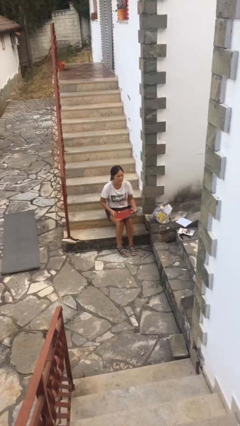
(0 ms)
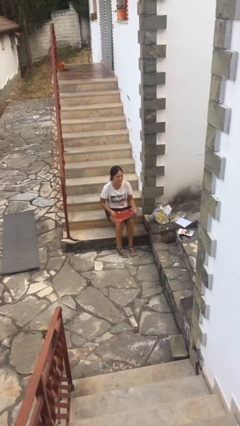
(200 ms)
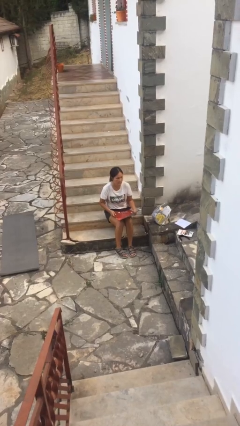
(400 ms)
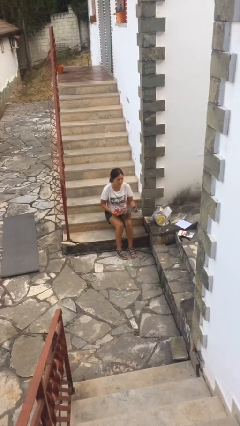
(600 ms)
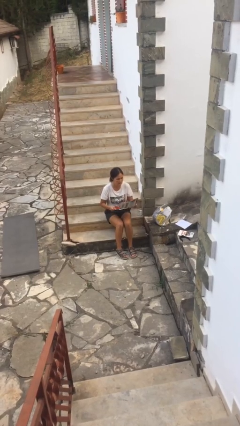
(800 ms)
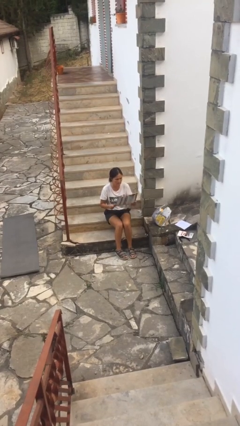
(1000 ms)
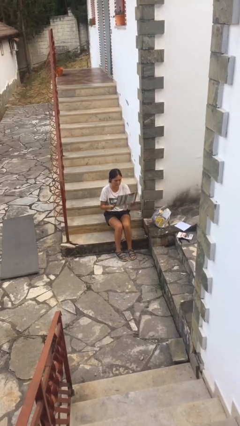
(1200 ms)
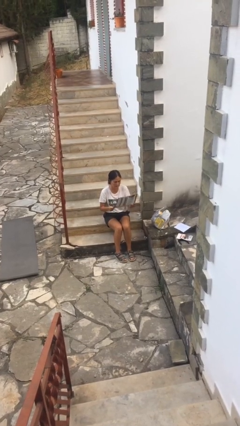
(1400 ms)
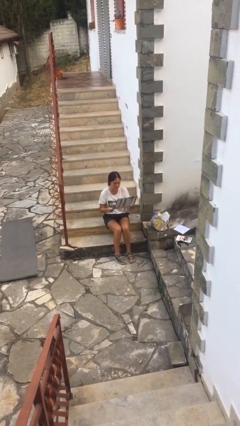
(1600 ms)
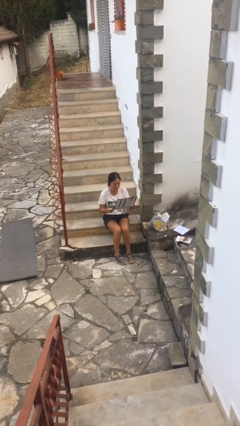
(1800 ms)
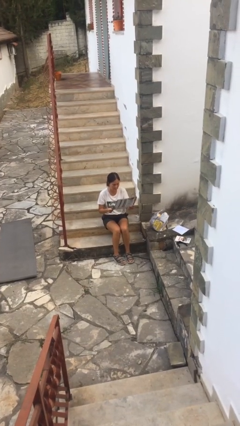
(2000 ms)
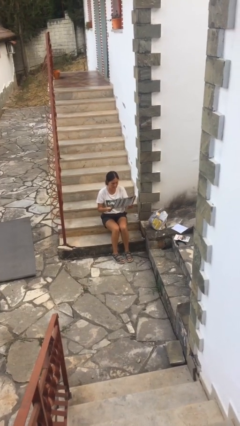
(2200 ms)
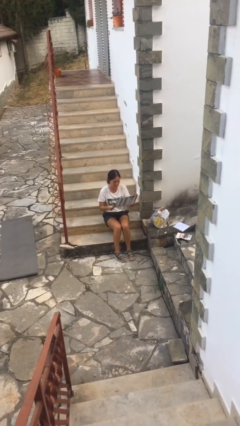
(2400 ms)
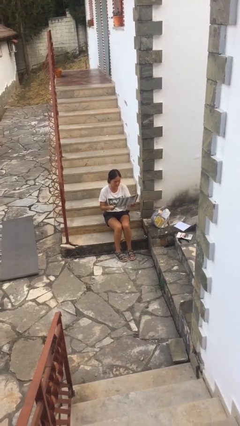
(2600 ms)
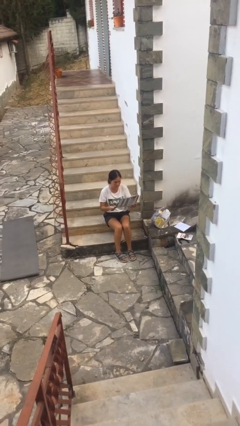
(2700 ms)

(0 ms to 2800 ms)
person reads newspaper

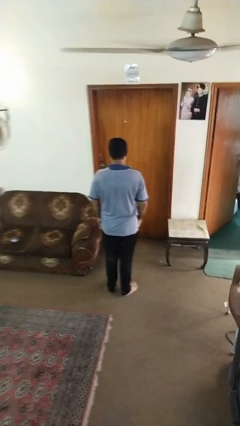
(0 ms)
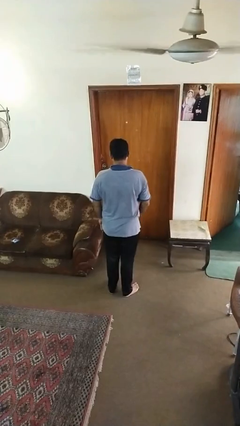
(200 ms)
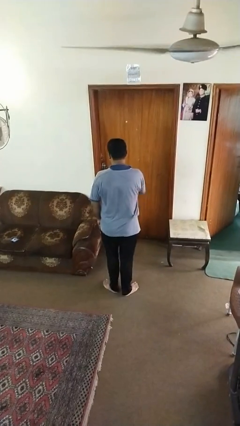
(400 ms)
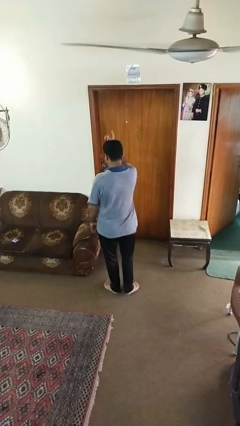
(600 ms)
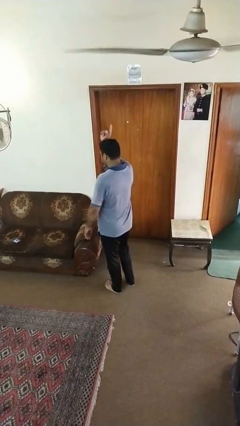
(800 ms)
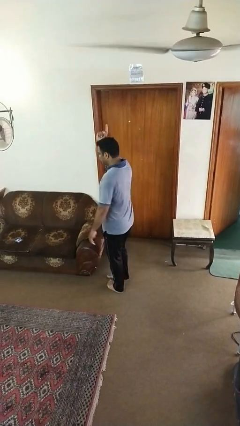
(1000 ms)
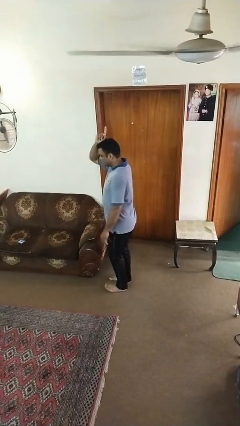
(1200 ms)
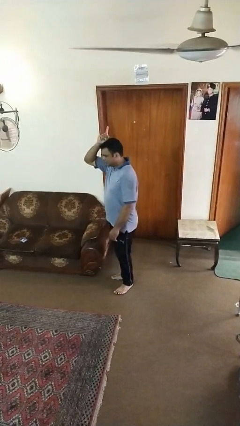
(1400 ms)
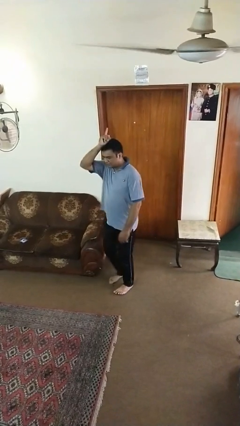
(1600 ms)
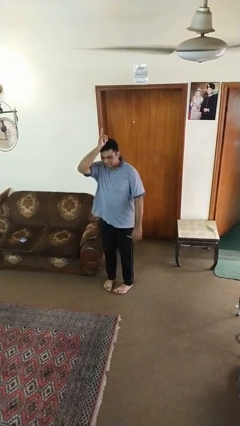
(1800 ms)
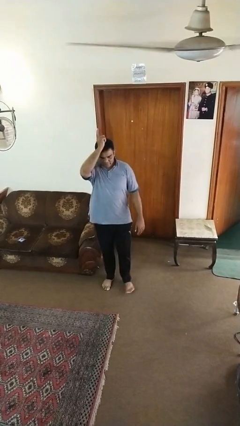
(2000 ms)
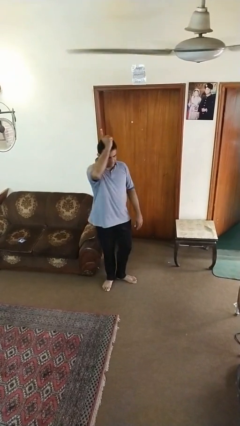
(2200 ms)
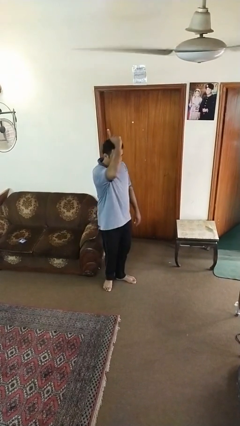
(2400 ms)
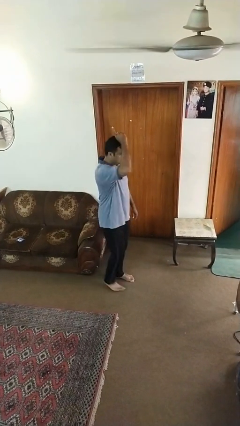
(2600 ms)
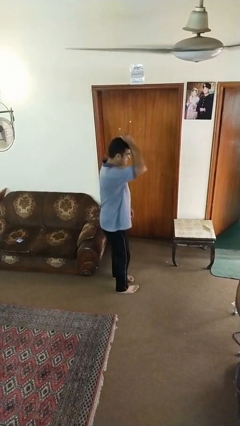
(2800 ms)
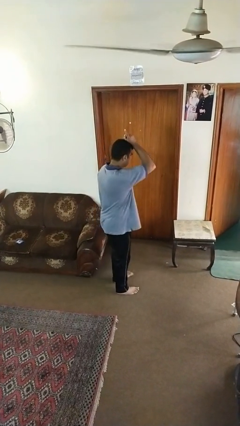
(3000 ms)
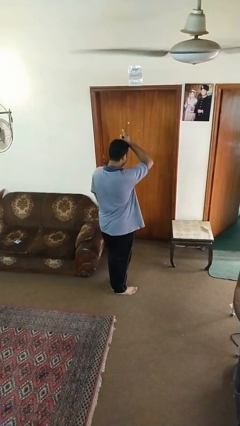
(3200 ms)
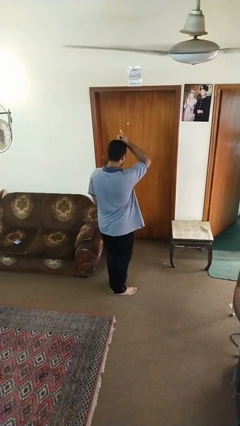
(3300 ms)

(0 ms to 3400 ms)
person twirls

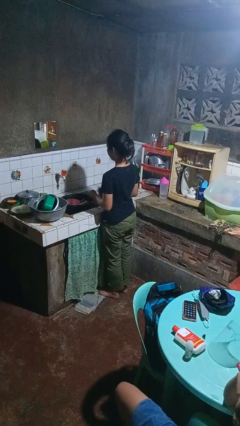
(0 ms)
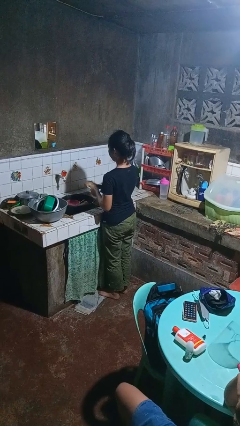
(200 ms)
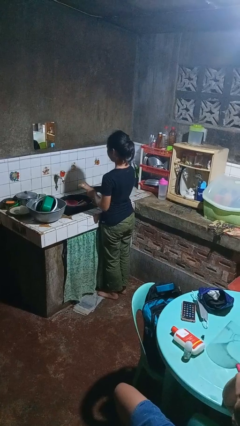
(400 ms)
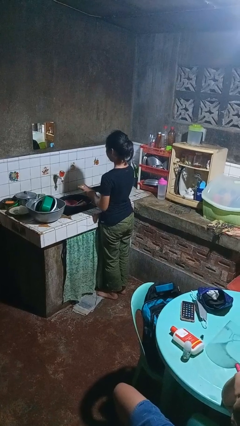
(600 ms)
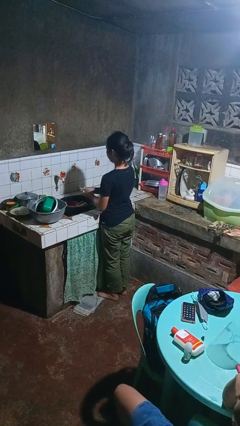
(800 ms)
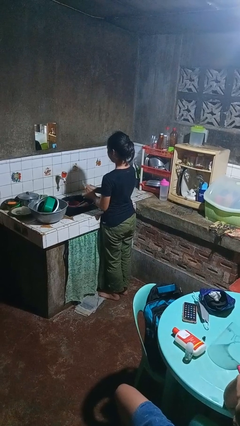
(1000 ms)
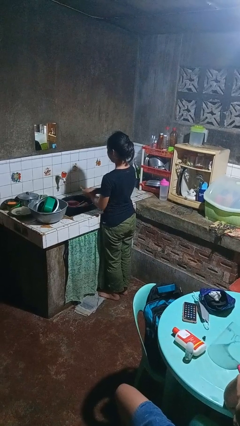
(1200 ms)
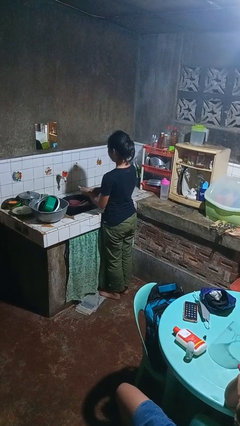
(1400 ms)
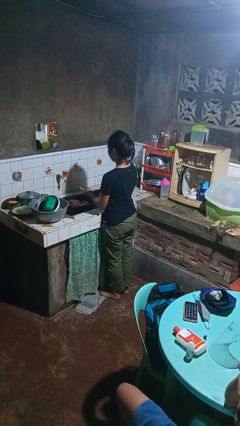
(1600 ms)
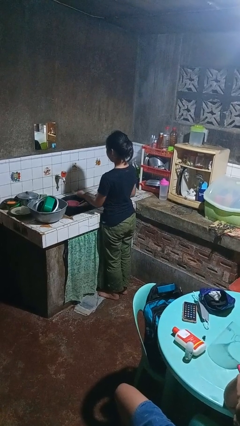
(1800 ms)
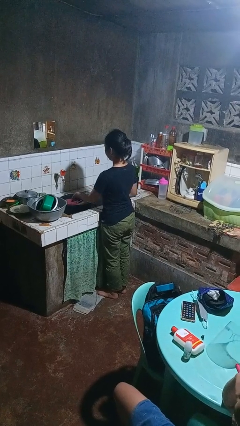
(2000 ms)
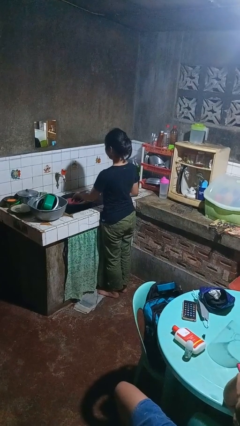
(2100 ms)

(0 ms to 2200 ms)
person washes dish

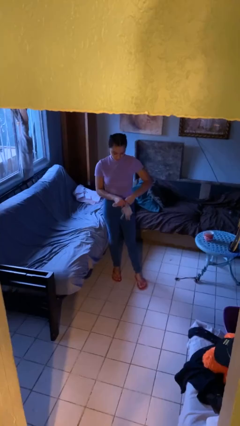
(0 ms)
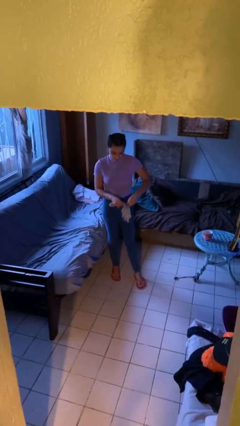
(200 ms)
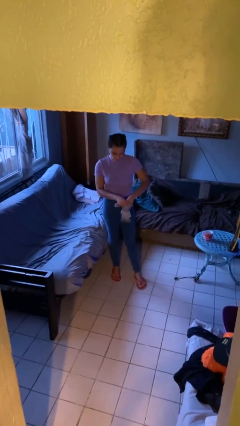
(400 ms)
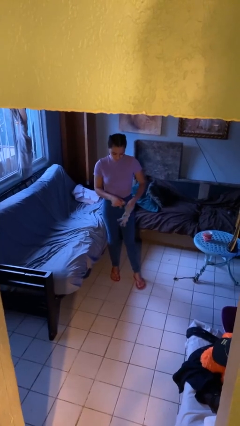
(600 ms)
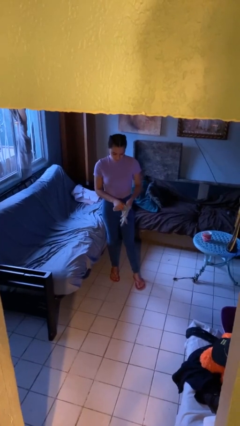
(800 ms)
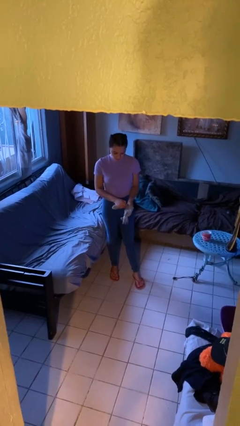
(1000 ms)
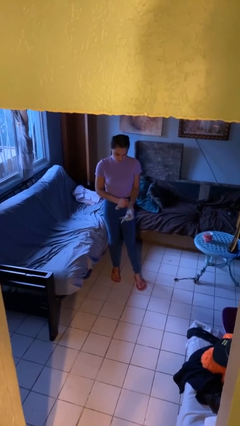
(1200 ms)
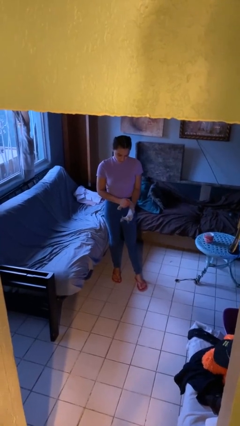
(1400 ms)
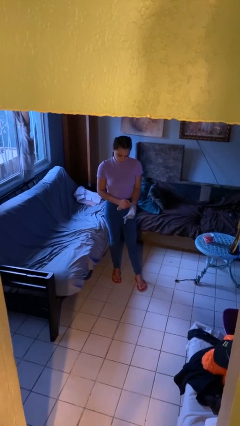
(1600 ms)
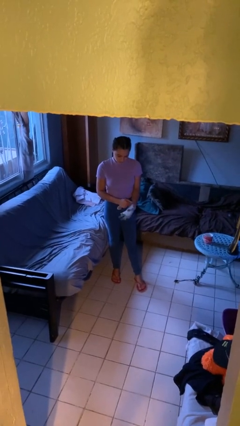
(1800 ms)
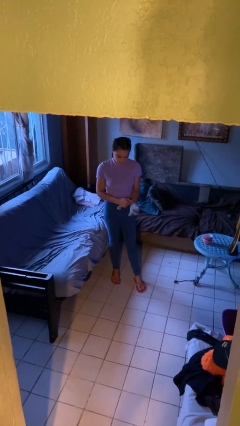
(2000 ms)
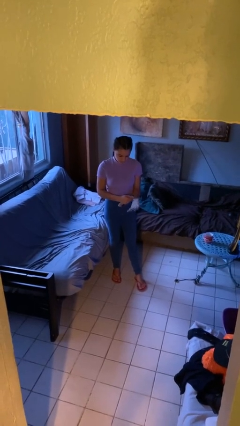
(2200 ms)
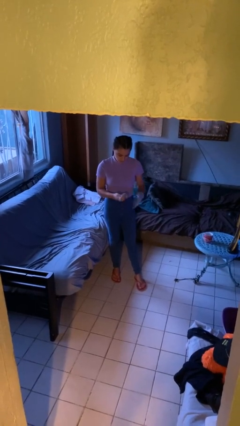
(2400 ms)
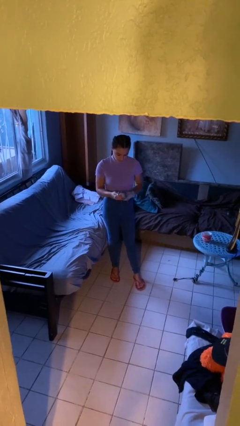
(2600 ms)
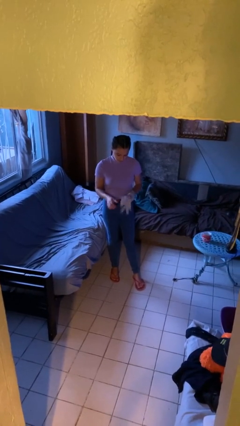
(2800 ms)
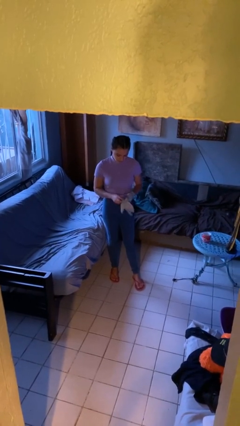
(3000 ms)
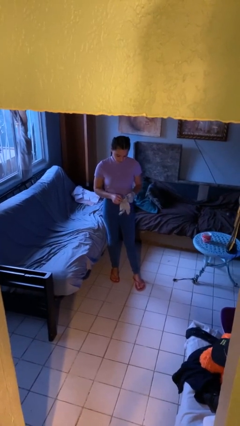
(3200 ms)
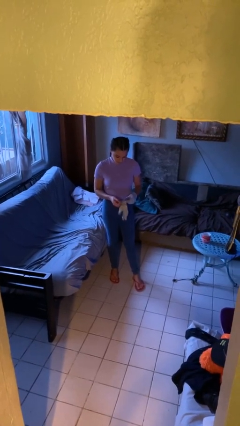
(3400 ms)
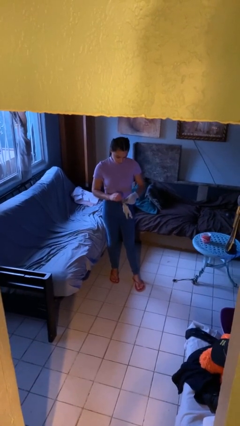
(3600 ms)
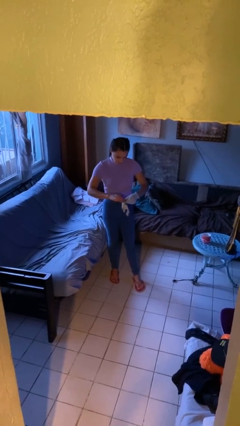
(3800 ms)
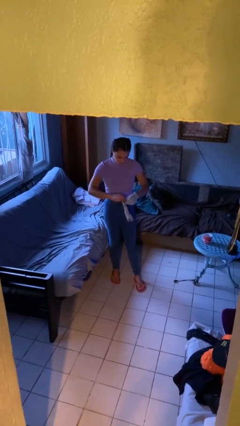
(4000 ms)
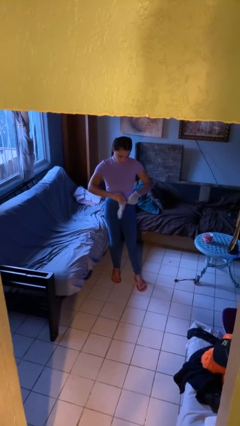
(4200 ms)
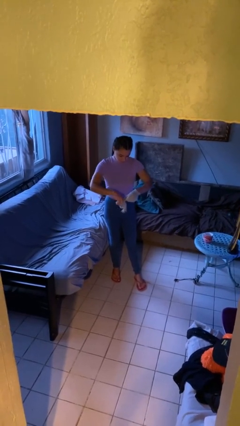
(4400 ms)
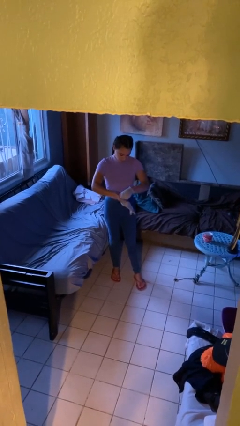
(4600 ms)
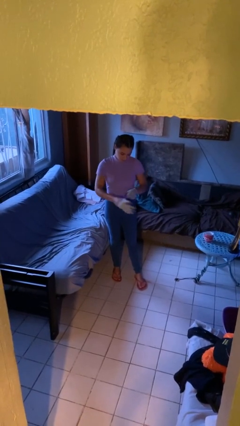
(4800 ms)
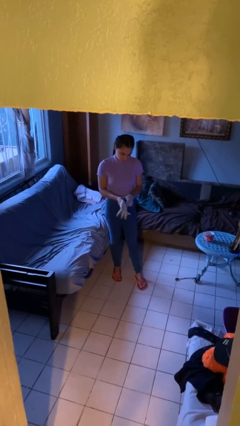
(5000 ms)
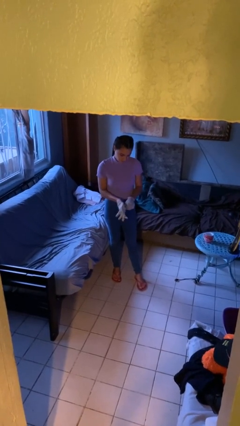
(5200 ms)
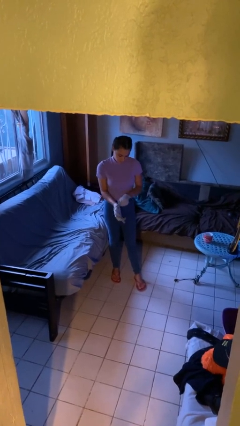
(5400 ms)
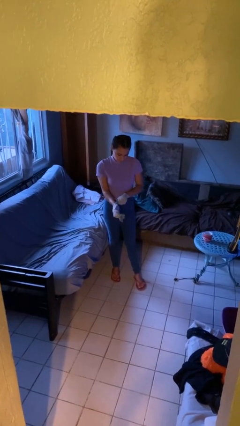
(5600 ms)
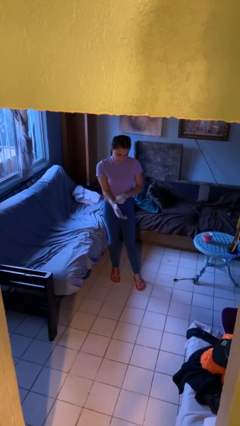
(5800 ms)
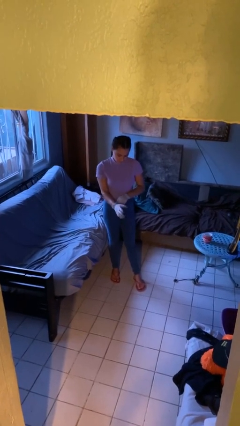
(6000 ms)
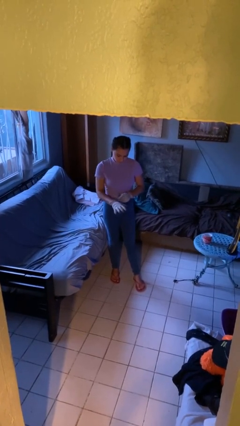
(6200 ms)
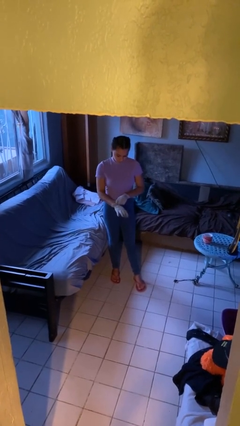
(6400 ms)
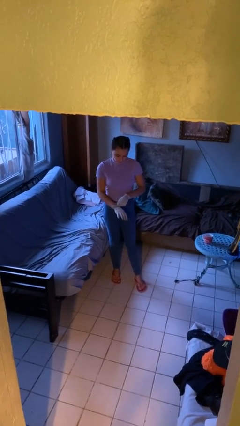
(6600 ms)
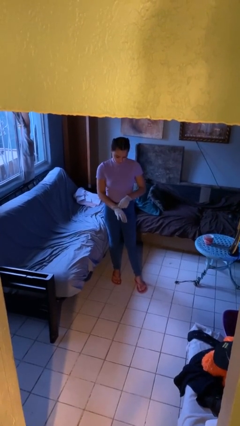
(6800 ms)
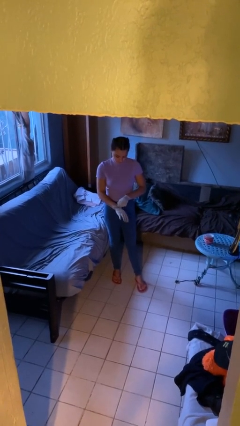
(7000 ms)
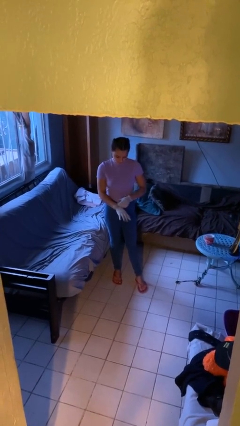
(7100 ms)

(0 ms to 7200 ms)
person puts on gloves

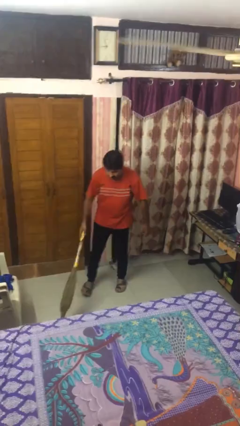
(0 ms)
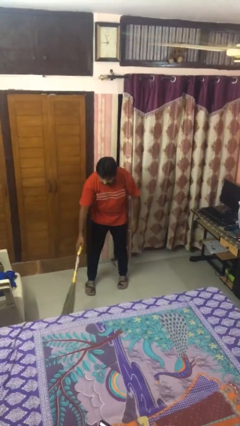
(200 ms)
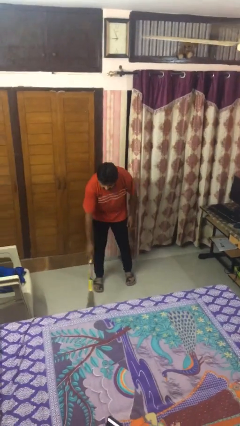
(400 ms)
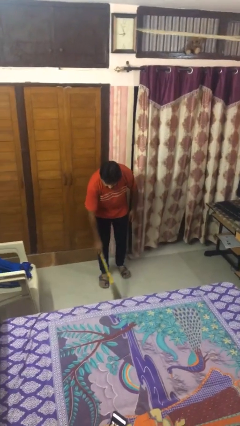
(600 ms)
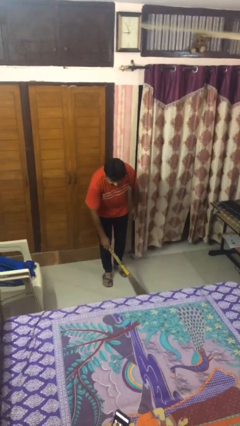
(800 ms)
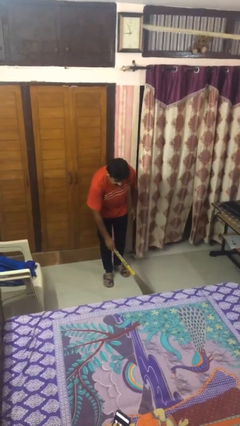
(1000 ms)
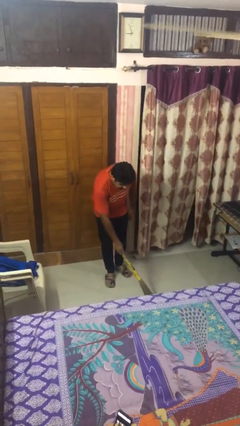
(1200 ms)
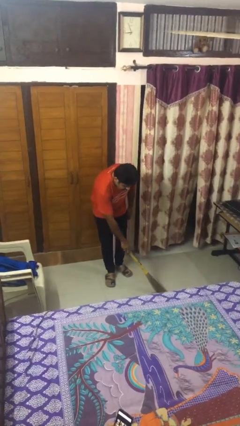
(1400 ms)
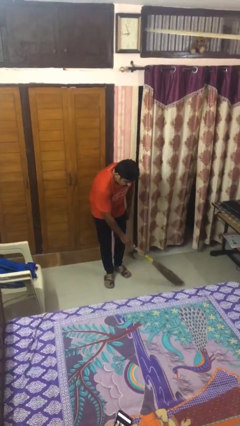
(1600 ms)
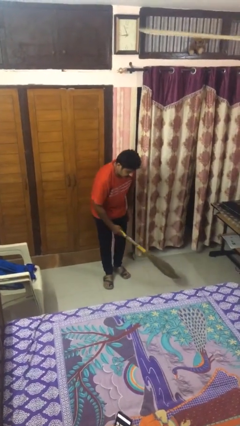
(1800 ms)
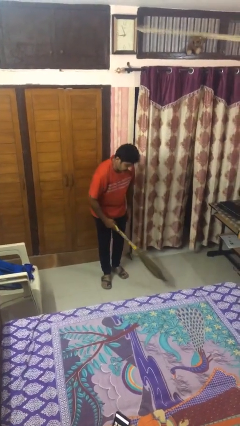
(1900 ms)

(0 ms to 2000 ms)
person sweeps floor
